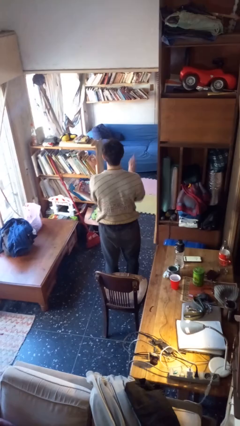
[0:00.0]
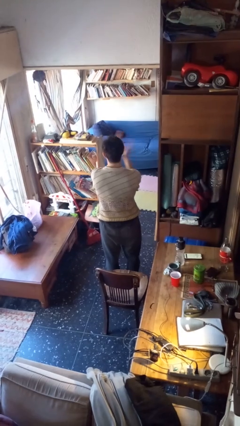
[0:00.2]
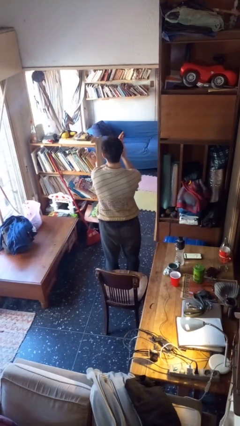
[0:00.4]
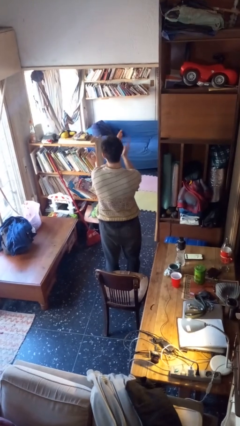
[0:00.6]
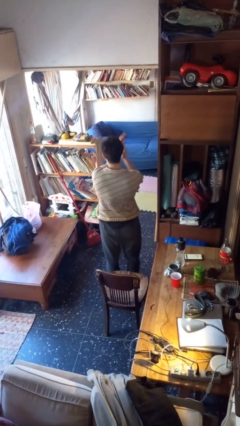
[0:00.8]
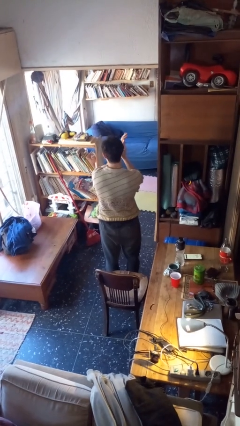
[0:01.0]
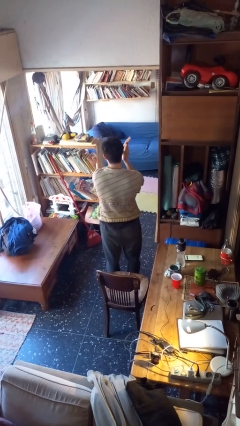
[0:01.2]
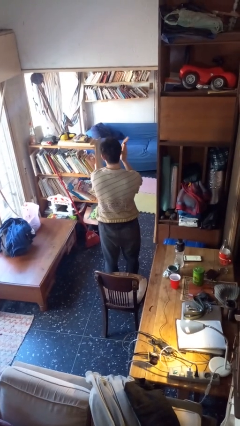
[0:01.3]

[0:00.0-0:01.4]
person claps hands

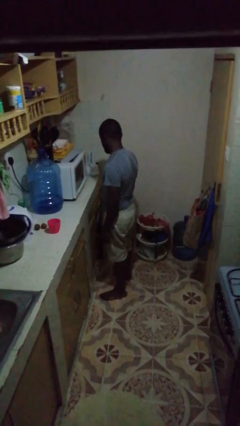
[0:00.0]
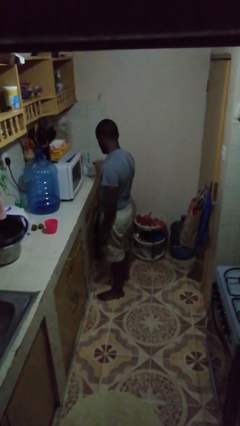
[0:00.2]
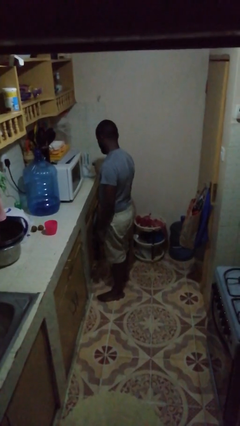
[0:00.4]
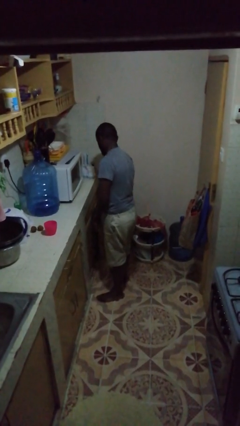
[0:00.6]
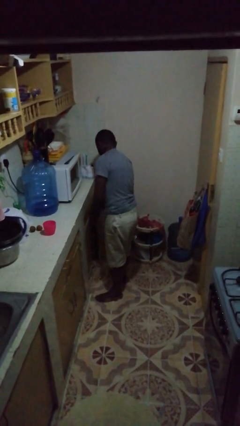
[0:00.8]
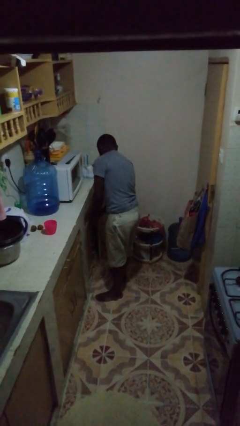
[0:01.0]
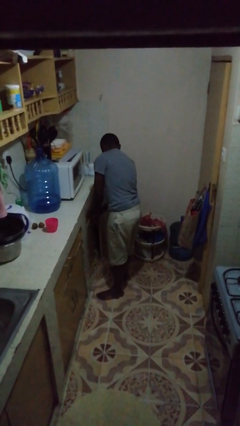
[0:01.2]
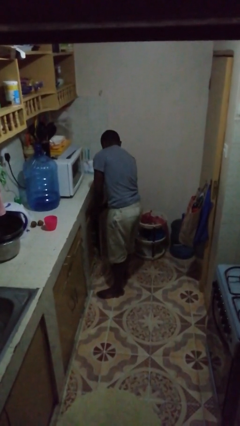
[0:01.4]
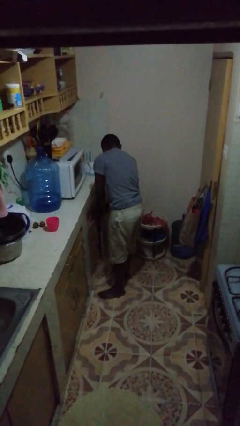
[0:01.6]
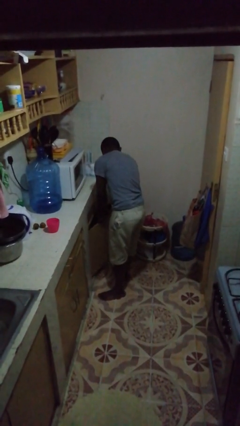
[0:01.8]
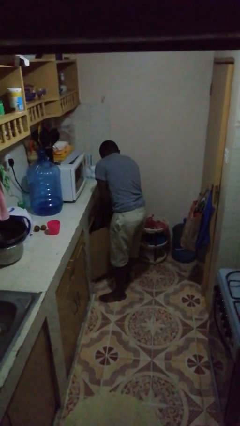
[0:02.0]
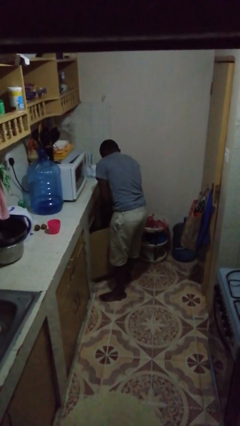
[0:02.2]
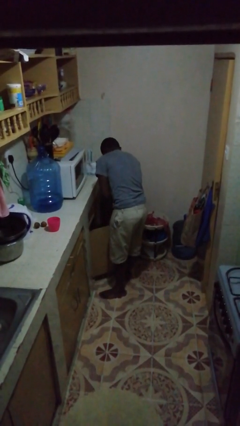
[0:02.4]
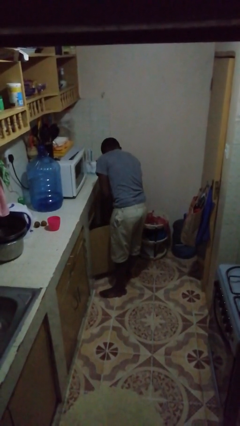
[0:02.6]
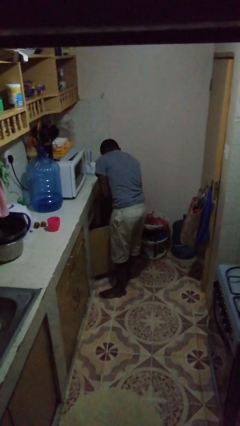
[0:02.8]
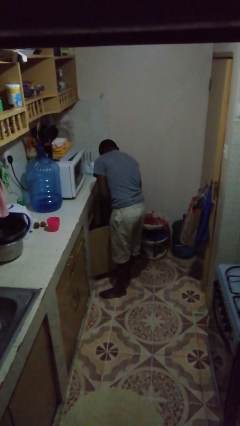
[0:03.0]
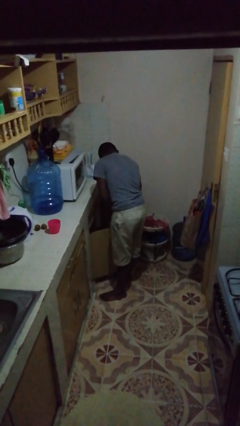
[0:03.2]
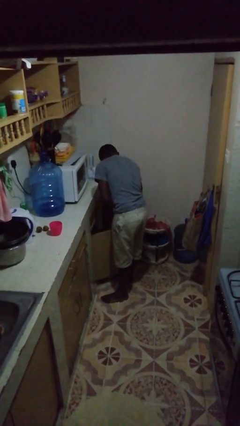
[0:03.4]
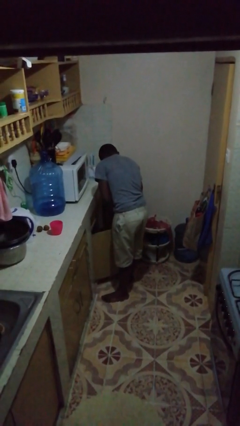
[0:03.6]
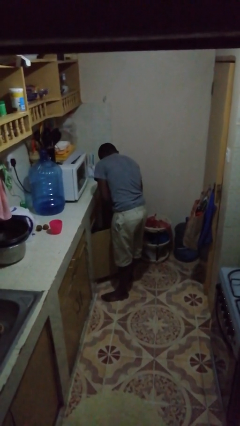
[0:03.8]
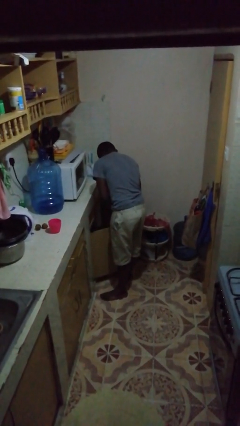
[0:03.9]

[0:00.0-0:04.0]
person opens cabinet

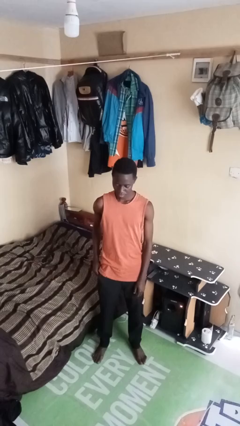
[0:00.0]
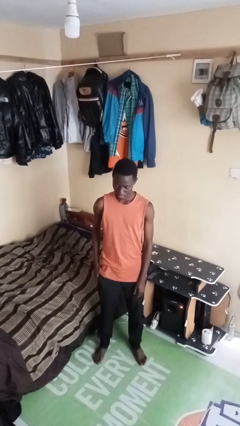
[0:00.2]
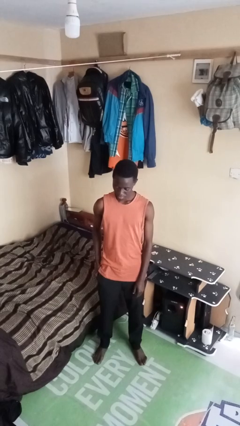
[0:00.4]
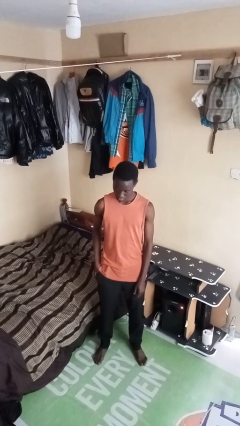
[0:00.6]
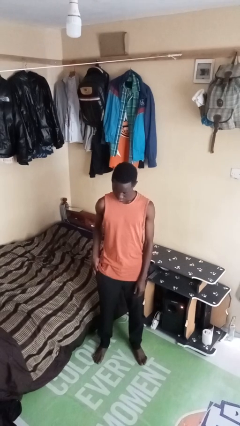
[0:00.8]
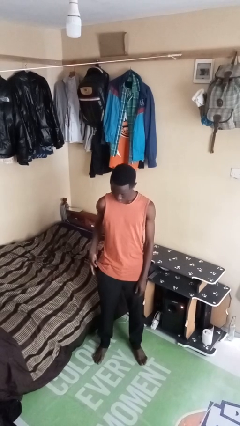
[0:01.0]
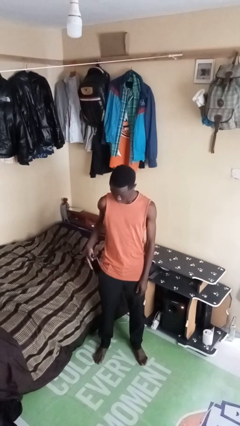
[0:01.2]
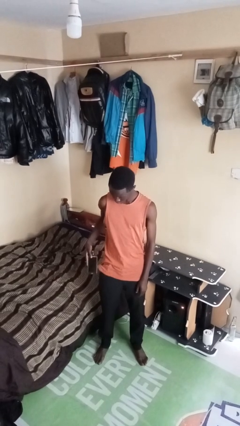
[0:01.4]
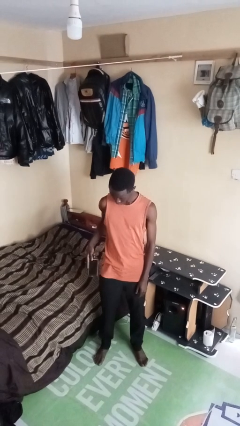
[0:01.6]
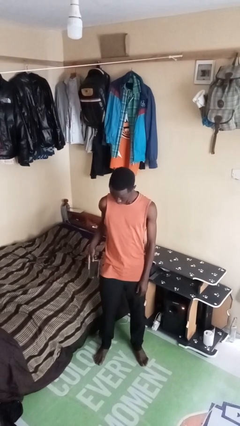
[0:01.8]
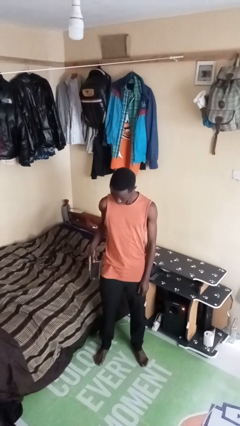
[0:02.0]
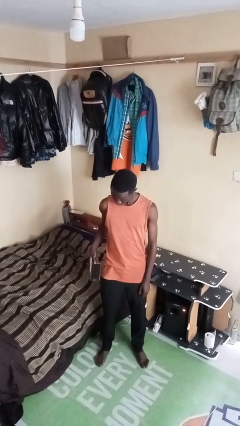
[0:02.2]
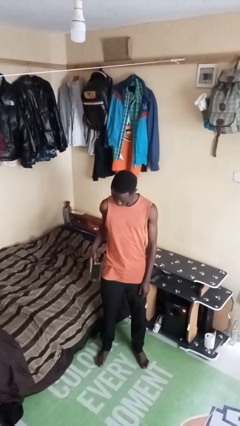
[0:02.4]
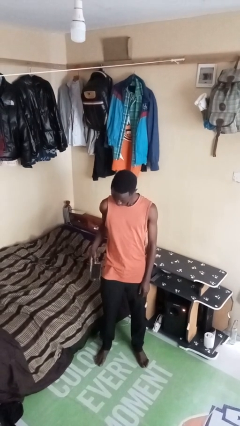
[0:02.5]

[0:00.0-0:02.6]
person takes phone from pocket

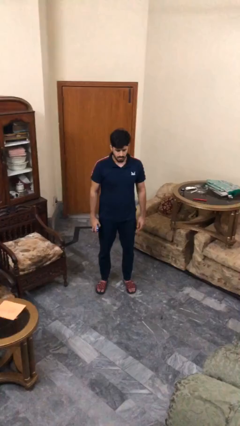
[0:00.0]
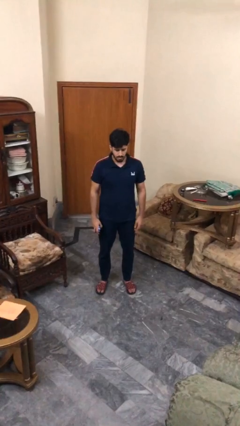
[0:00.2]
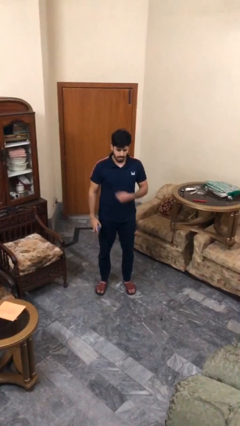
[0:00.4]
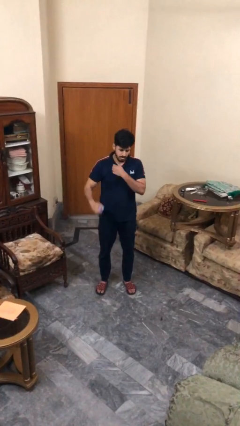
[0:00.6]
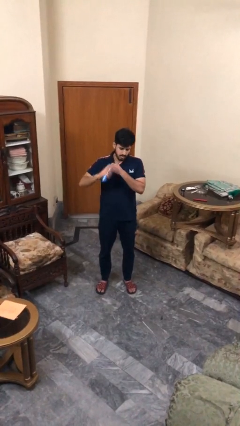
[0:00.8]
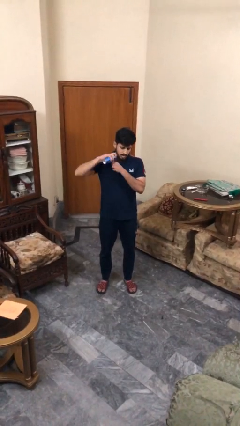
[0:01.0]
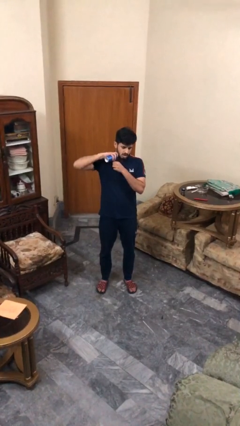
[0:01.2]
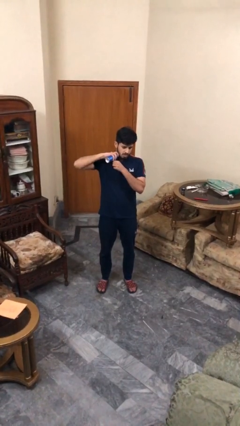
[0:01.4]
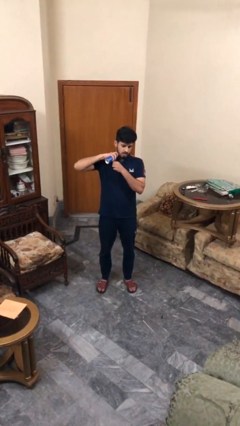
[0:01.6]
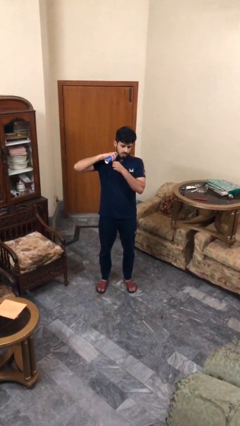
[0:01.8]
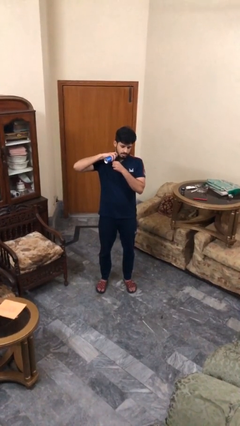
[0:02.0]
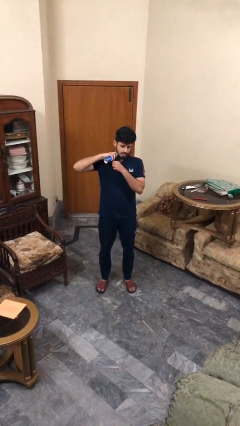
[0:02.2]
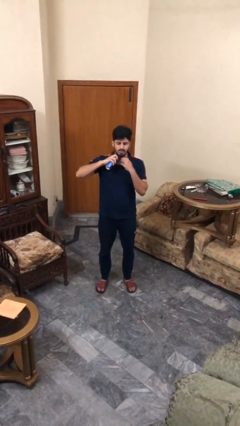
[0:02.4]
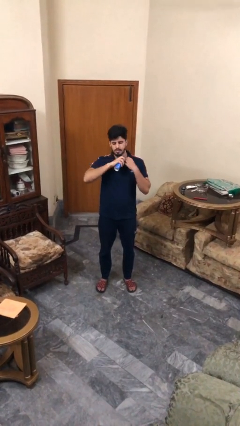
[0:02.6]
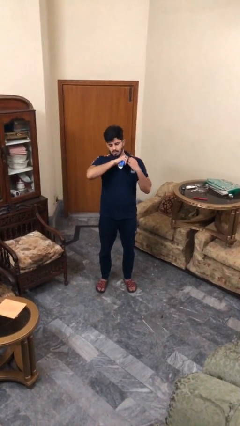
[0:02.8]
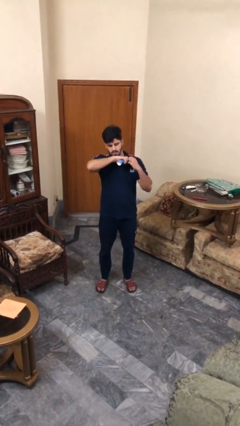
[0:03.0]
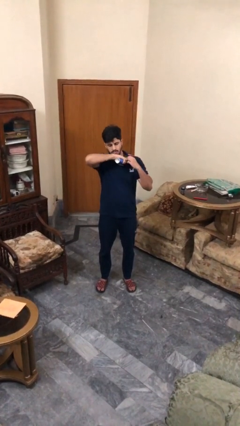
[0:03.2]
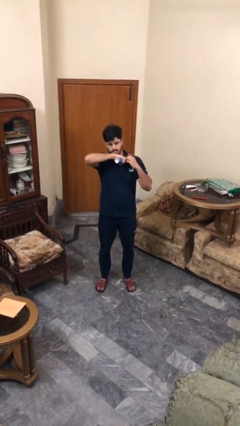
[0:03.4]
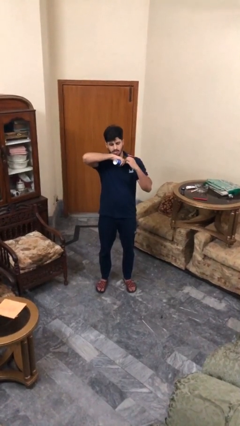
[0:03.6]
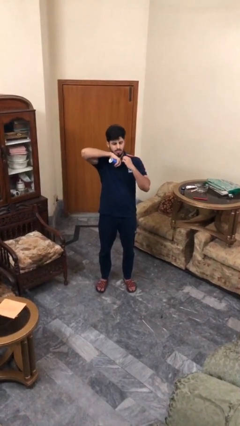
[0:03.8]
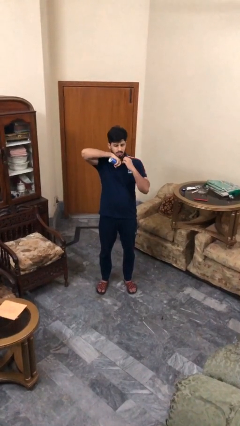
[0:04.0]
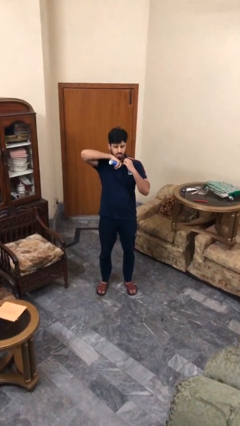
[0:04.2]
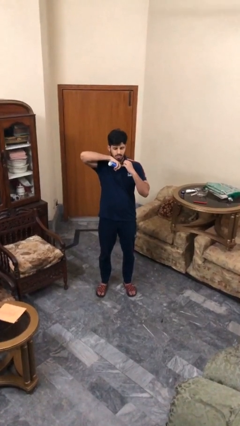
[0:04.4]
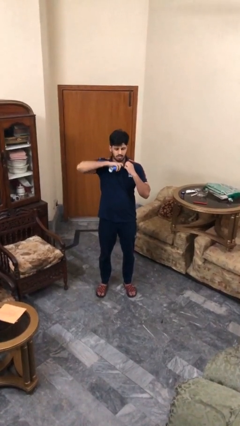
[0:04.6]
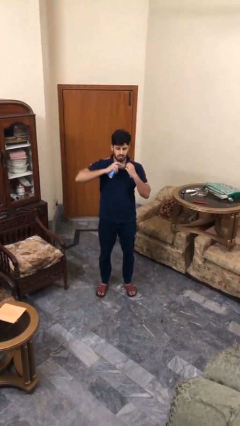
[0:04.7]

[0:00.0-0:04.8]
person applies deodorant

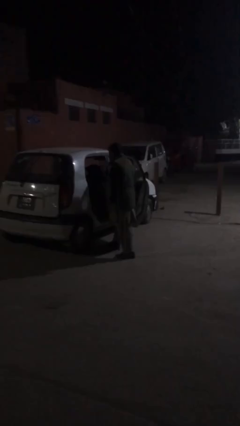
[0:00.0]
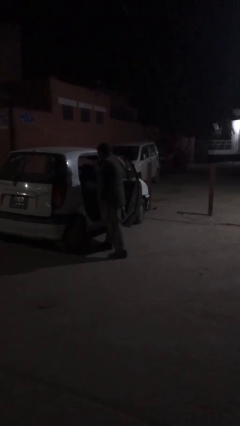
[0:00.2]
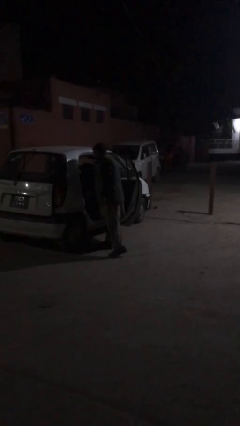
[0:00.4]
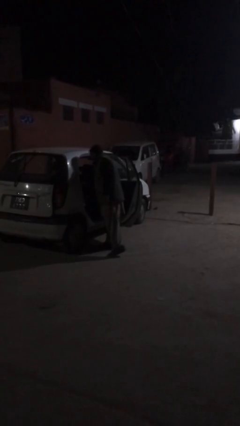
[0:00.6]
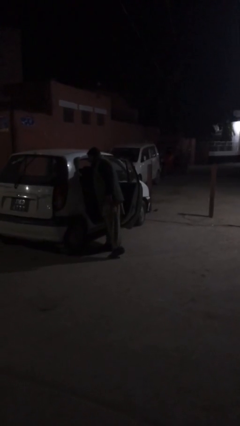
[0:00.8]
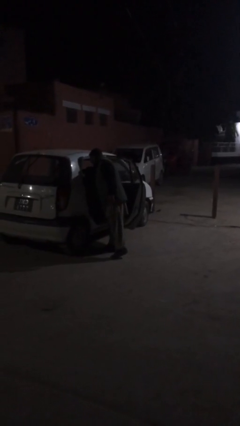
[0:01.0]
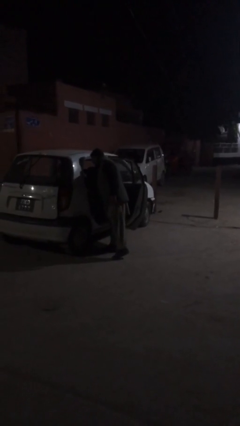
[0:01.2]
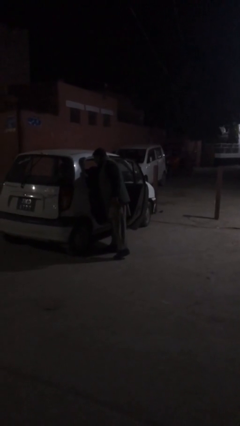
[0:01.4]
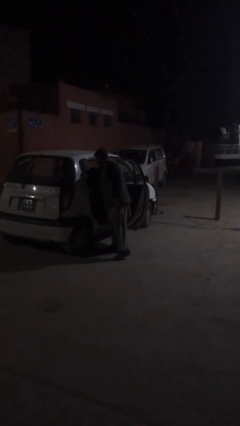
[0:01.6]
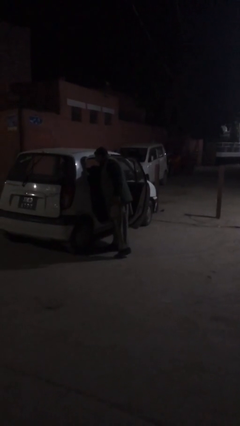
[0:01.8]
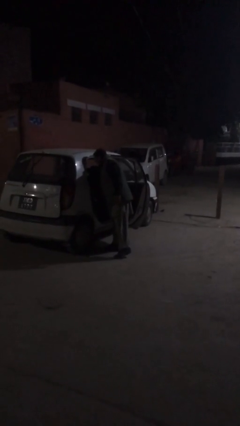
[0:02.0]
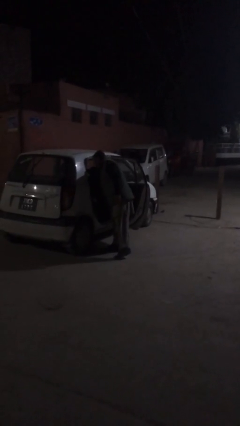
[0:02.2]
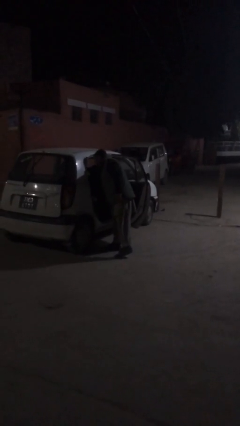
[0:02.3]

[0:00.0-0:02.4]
person loads car

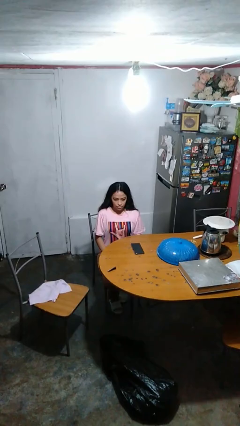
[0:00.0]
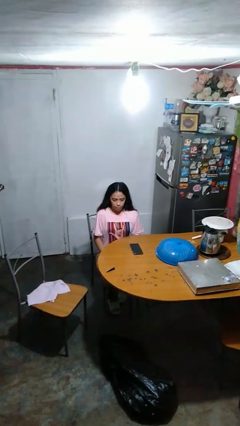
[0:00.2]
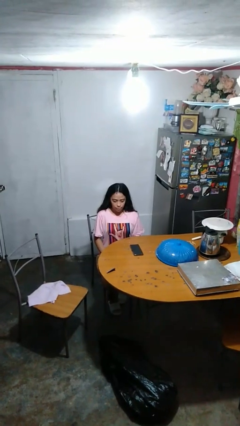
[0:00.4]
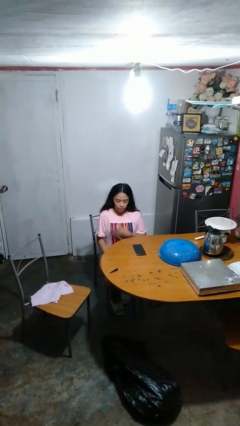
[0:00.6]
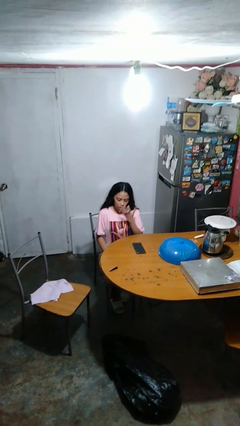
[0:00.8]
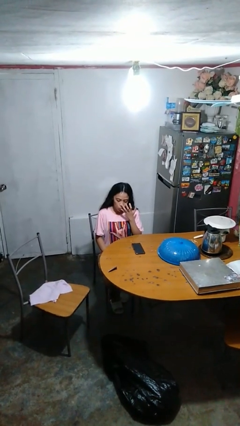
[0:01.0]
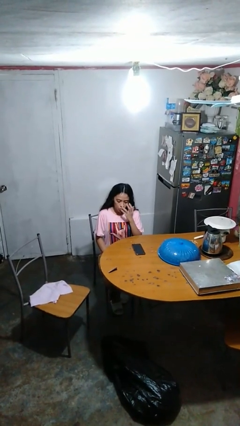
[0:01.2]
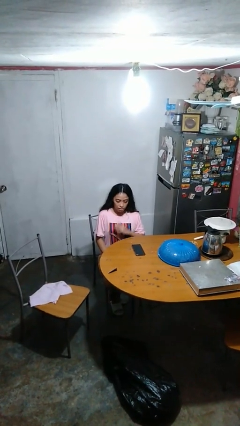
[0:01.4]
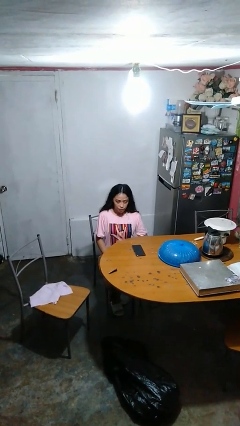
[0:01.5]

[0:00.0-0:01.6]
person licks fingers

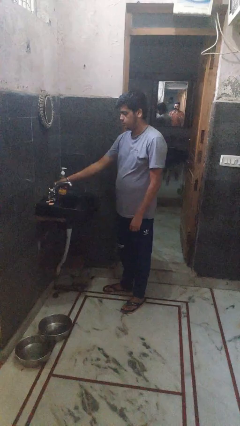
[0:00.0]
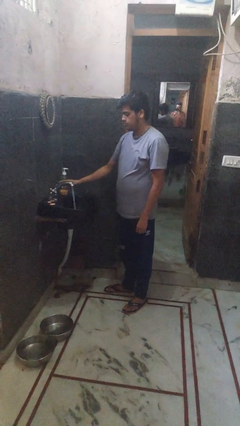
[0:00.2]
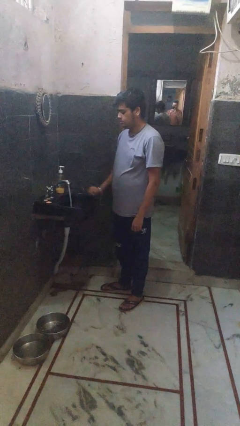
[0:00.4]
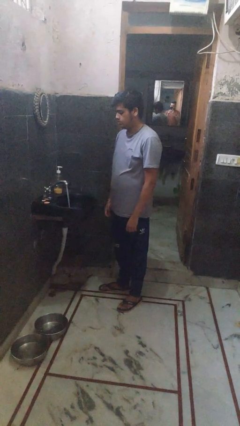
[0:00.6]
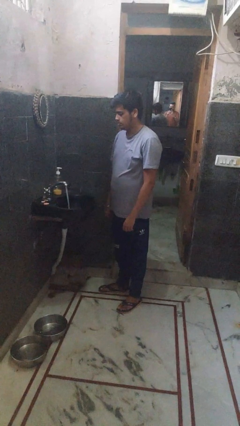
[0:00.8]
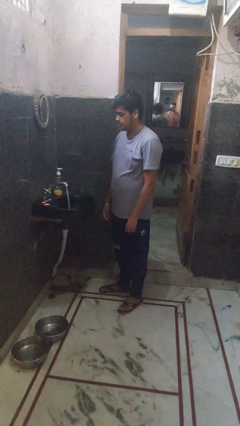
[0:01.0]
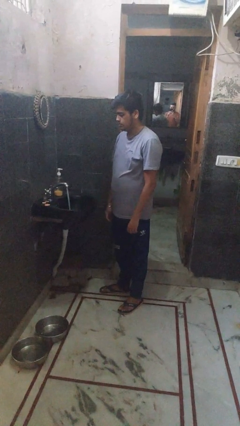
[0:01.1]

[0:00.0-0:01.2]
person turns on faucet
